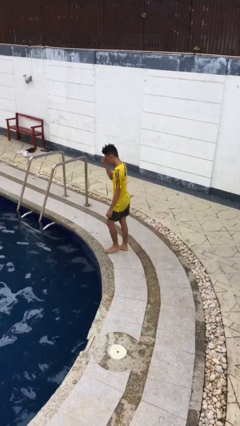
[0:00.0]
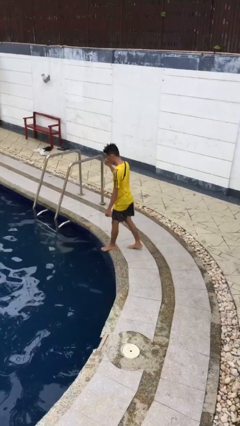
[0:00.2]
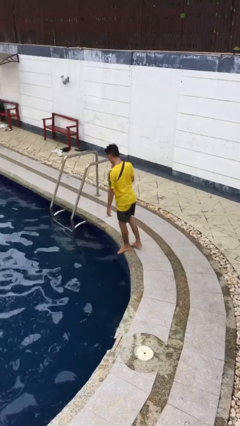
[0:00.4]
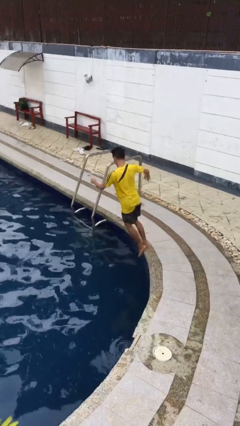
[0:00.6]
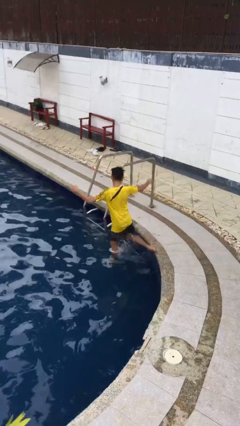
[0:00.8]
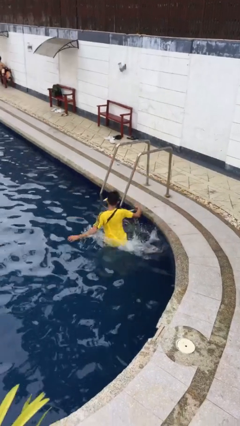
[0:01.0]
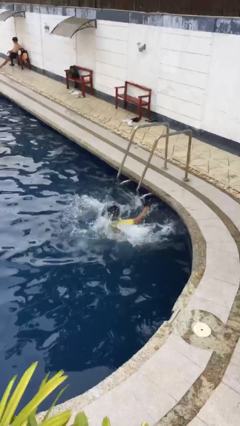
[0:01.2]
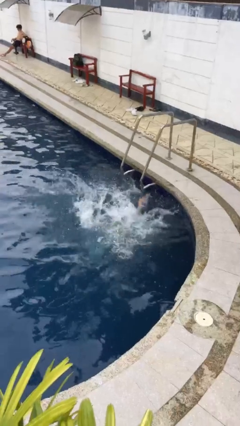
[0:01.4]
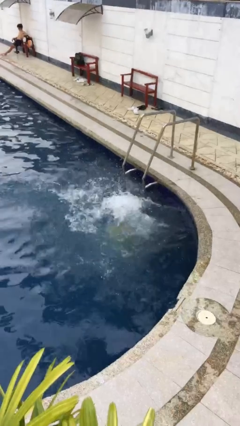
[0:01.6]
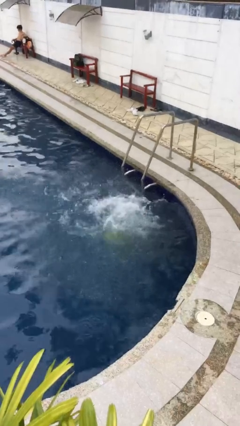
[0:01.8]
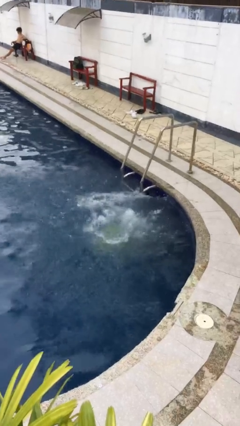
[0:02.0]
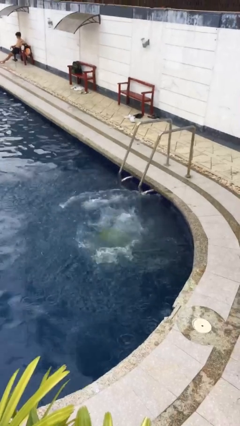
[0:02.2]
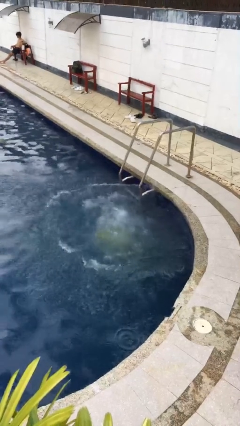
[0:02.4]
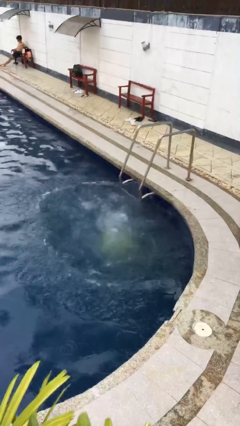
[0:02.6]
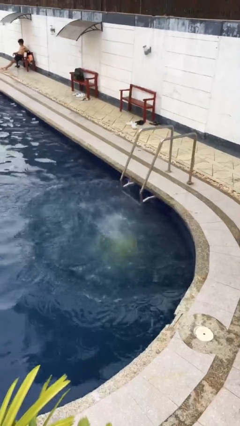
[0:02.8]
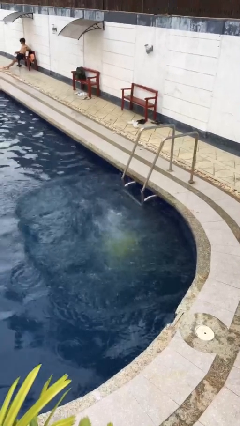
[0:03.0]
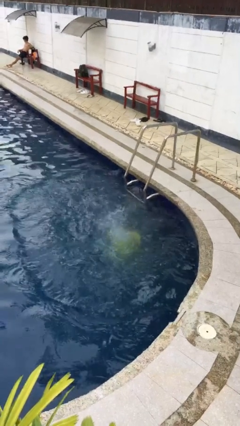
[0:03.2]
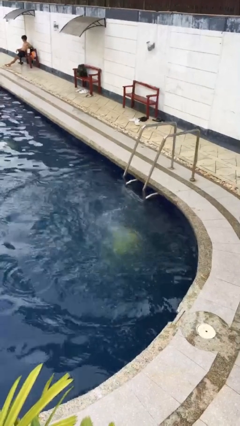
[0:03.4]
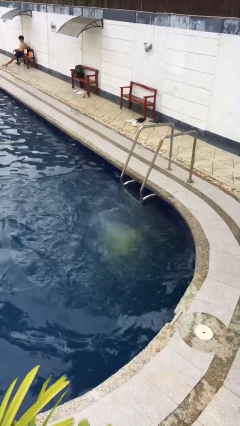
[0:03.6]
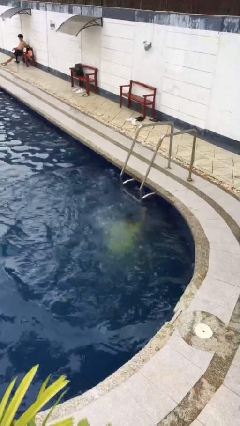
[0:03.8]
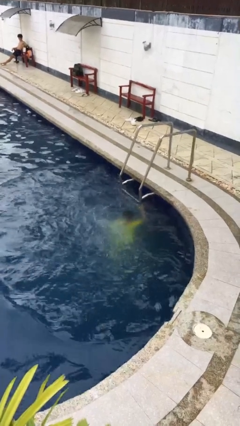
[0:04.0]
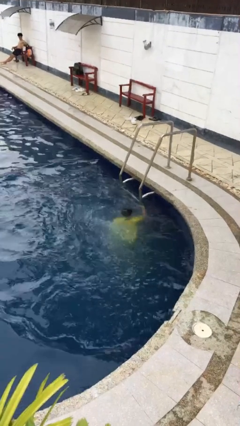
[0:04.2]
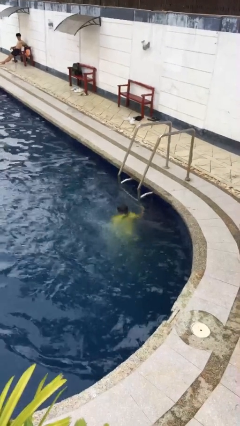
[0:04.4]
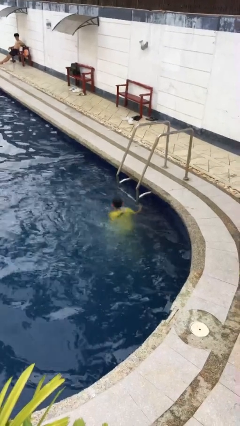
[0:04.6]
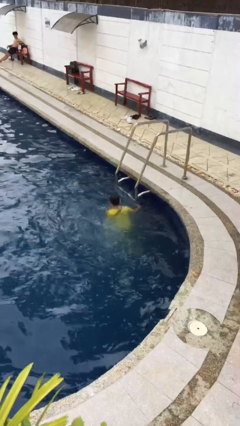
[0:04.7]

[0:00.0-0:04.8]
person falls into pool

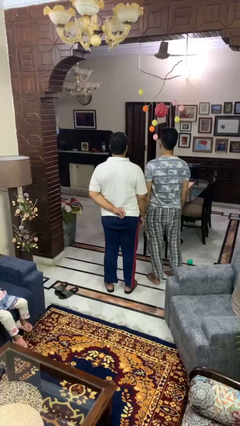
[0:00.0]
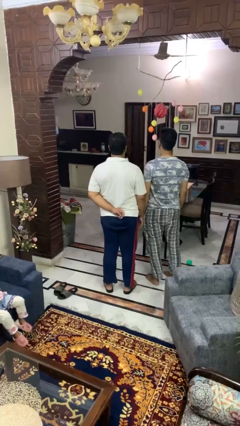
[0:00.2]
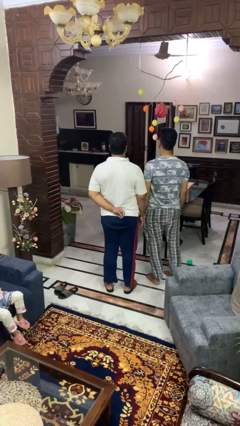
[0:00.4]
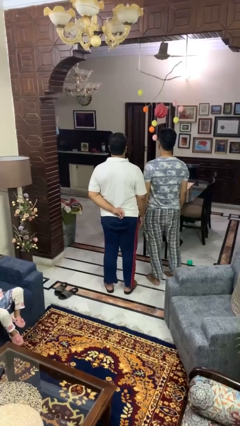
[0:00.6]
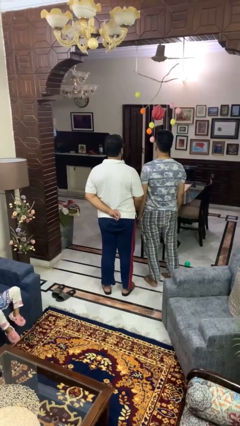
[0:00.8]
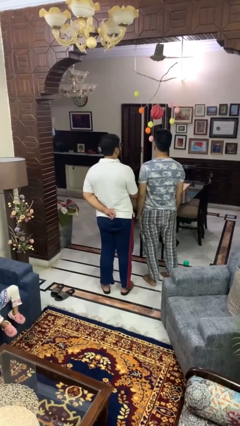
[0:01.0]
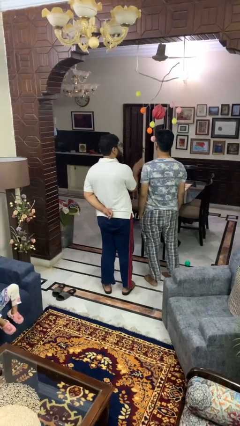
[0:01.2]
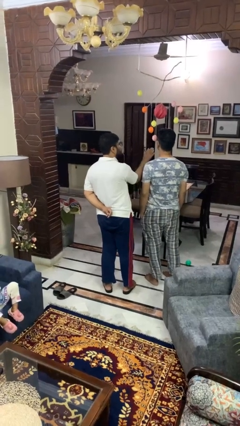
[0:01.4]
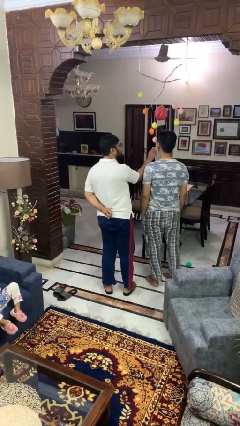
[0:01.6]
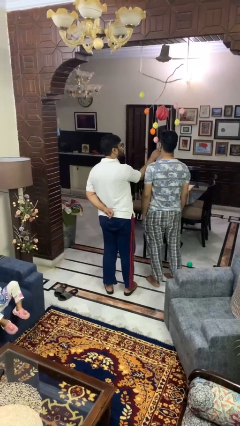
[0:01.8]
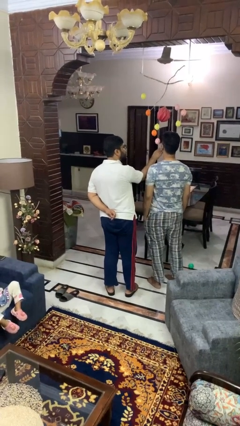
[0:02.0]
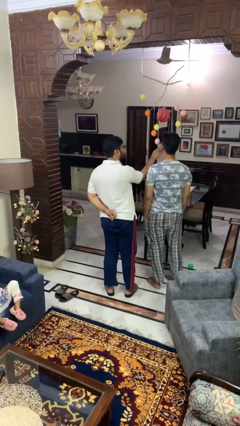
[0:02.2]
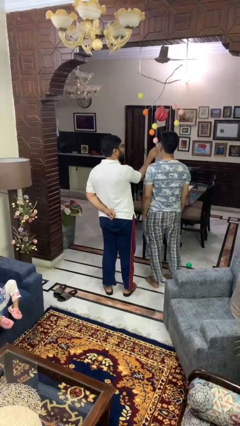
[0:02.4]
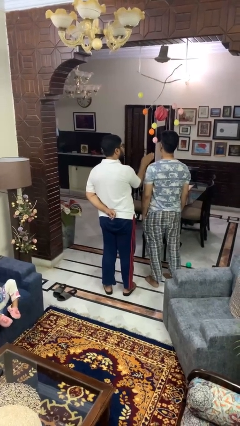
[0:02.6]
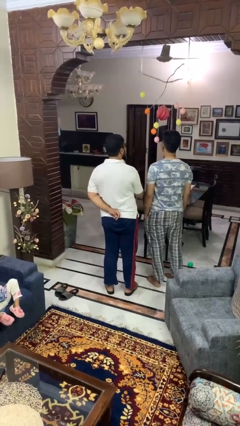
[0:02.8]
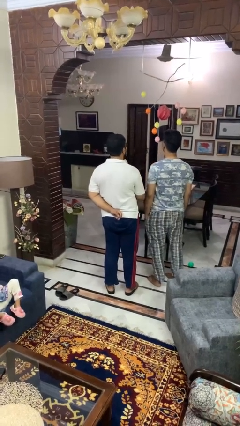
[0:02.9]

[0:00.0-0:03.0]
person nudges person with elbow

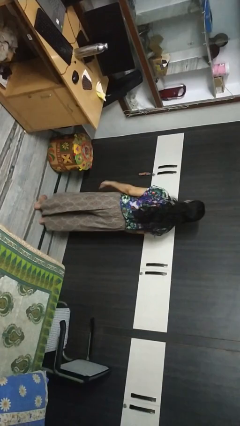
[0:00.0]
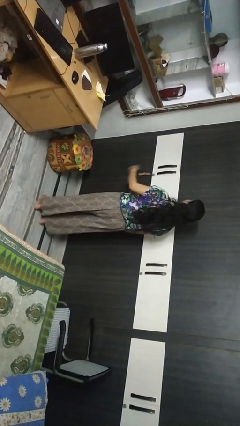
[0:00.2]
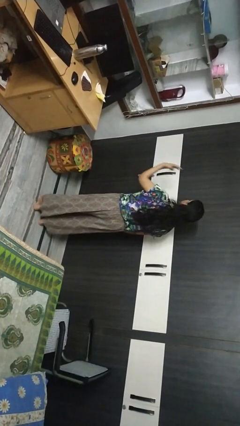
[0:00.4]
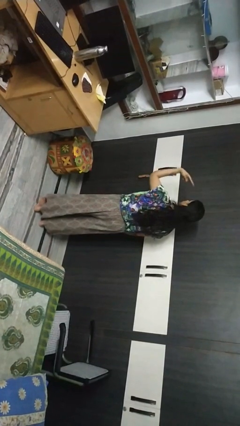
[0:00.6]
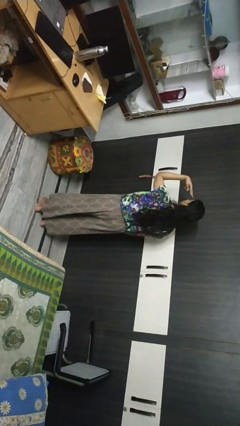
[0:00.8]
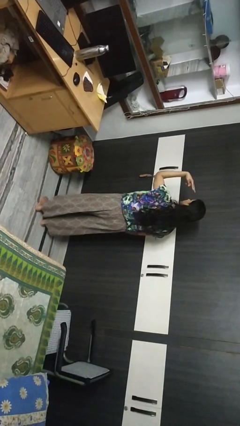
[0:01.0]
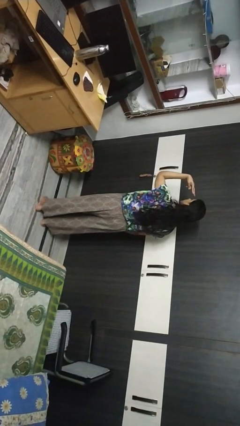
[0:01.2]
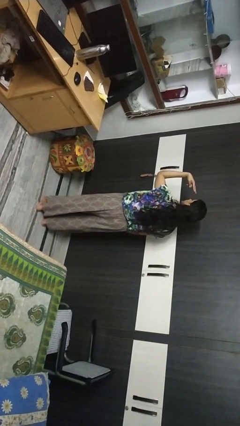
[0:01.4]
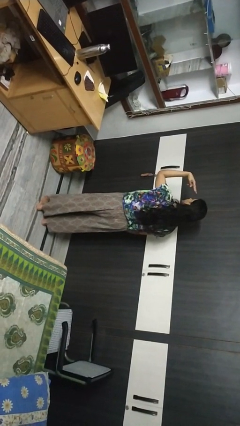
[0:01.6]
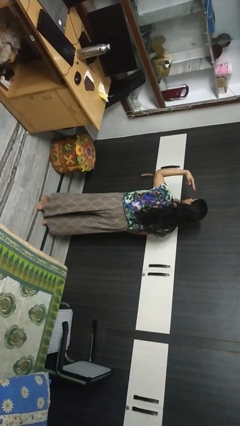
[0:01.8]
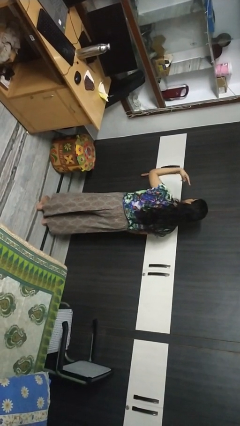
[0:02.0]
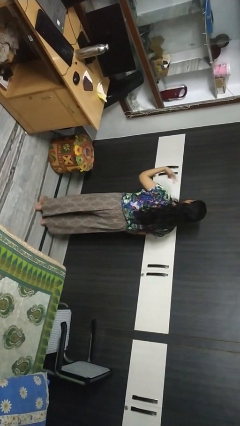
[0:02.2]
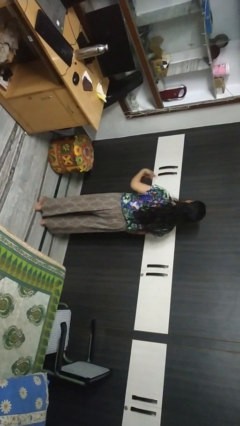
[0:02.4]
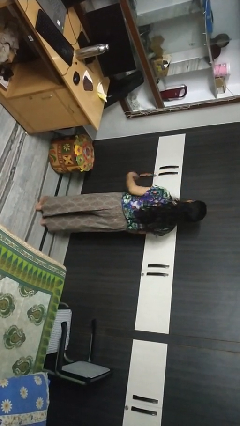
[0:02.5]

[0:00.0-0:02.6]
person gestures watch closely

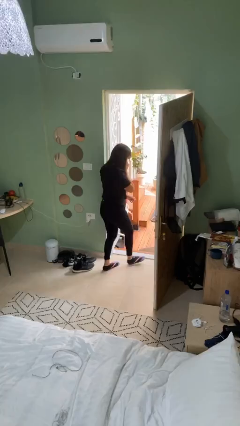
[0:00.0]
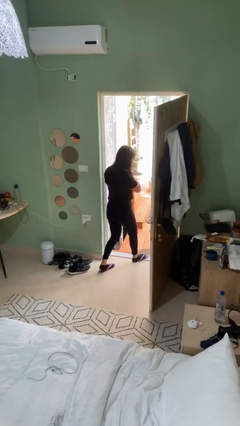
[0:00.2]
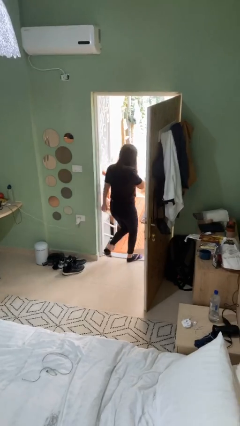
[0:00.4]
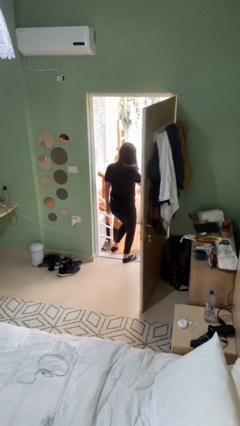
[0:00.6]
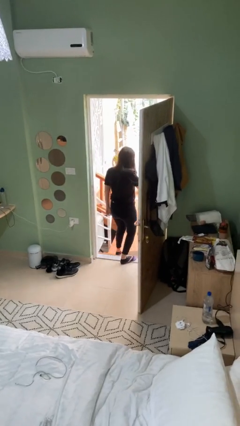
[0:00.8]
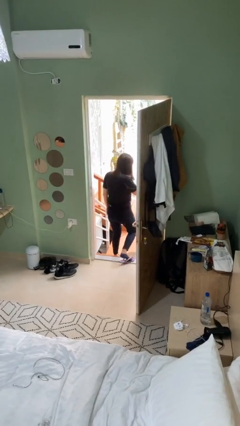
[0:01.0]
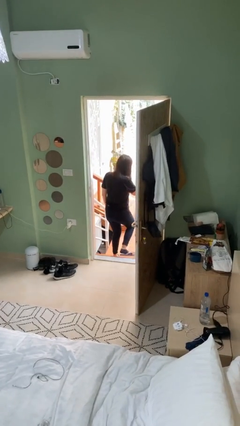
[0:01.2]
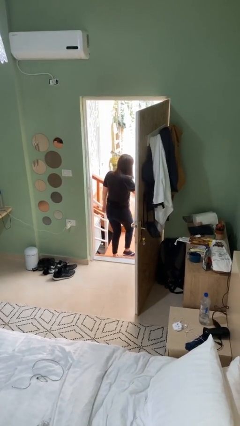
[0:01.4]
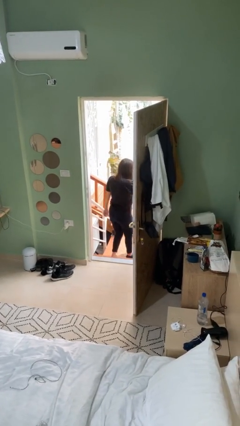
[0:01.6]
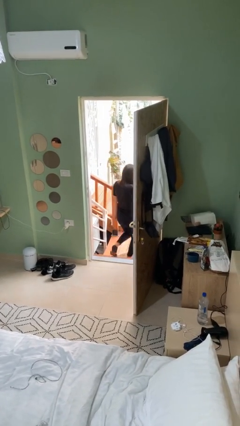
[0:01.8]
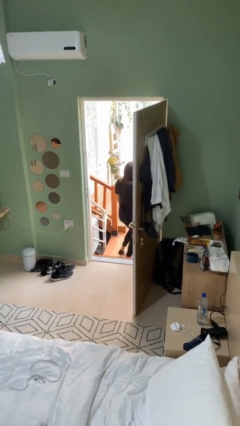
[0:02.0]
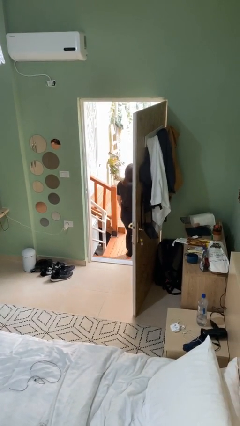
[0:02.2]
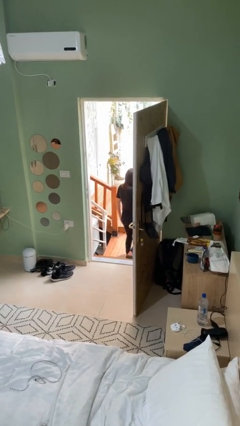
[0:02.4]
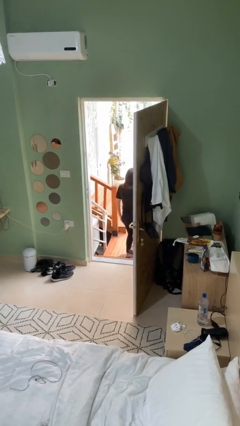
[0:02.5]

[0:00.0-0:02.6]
person exits scene through structure

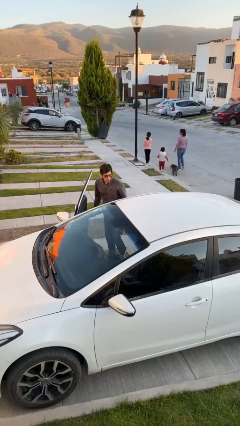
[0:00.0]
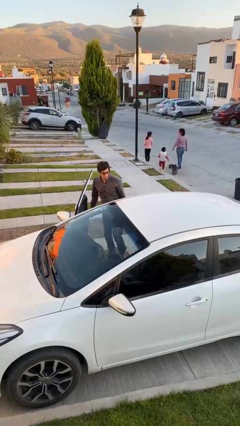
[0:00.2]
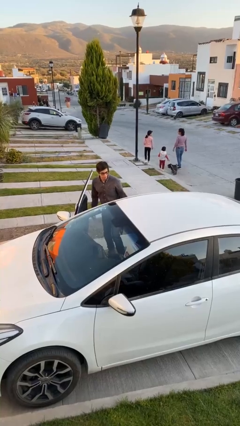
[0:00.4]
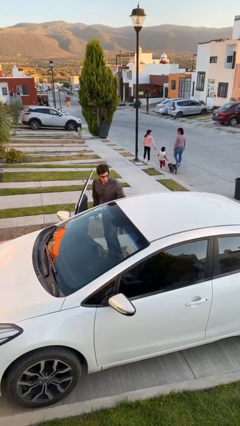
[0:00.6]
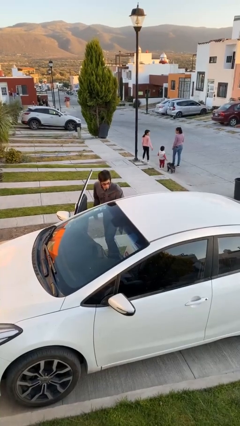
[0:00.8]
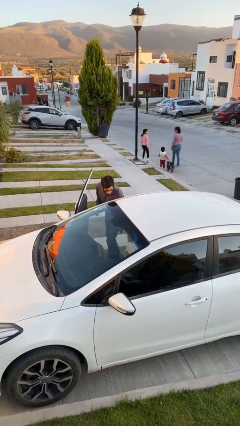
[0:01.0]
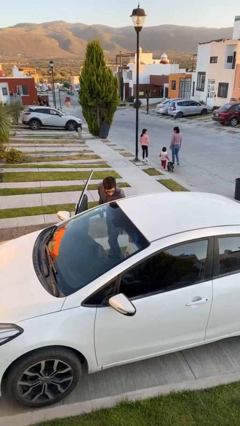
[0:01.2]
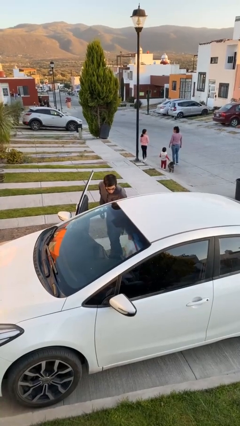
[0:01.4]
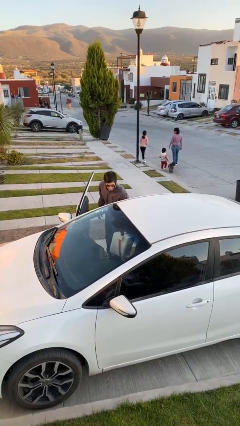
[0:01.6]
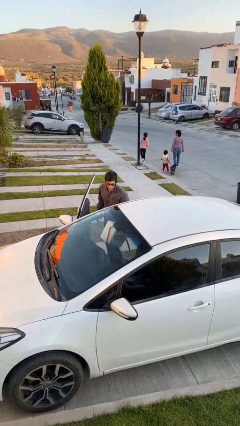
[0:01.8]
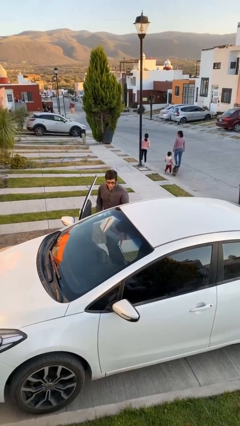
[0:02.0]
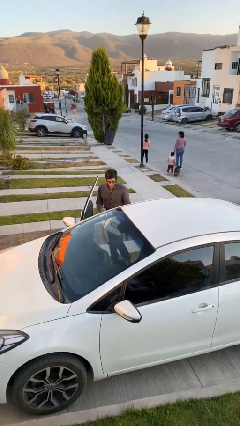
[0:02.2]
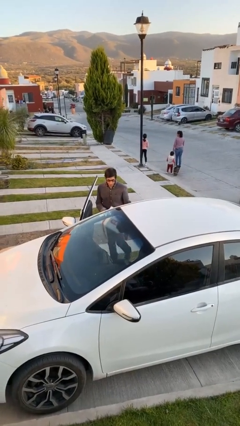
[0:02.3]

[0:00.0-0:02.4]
person unloads car

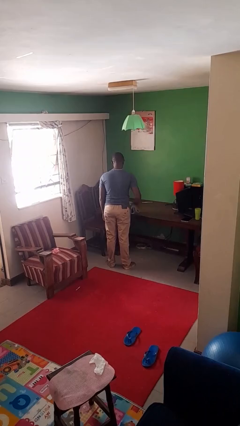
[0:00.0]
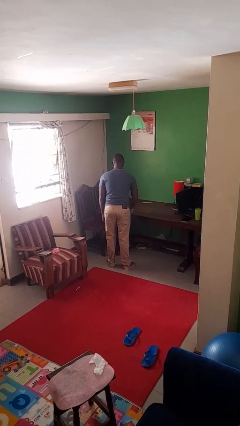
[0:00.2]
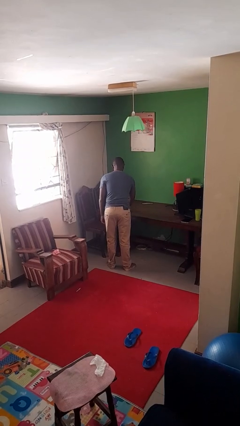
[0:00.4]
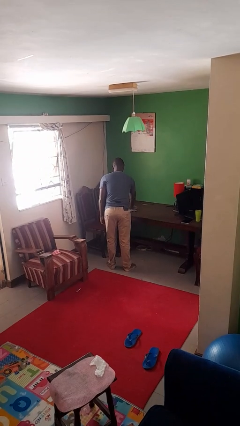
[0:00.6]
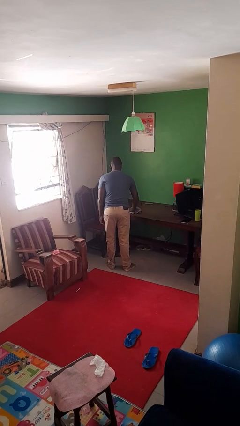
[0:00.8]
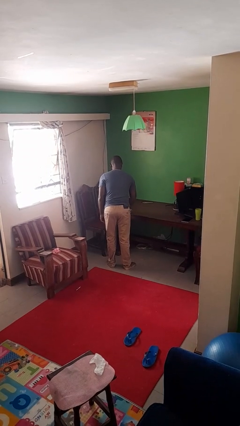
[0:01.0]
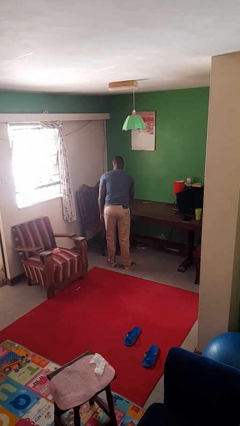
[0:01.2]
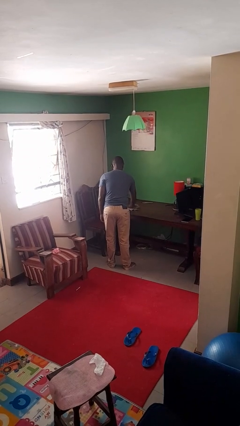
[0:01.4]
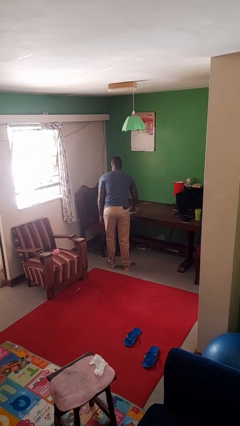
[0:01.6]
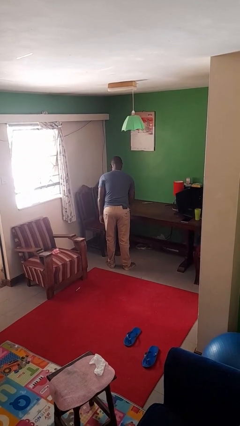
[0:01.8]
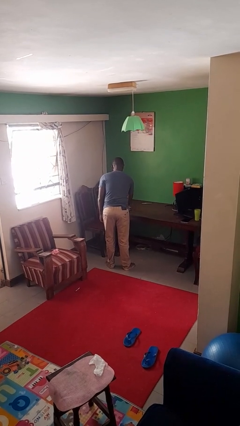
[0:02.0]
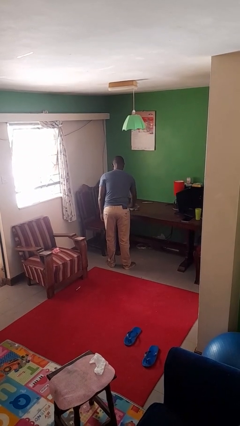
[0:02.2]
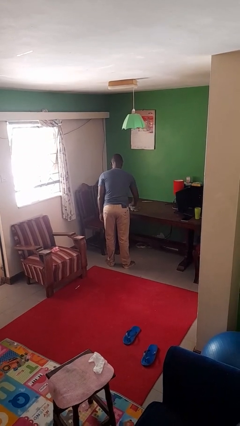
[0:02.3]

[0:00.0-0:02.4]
person cleans table with rag
